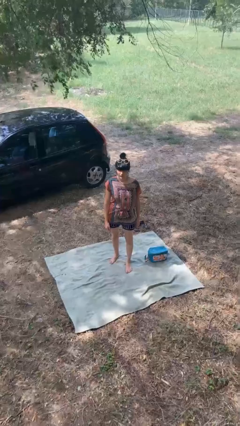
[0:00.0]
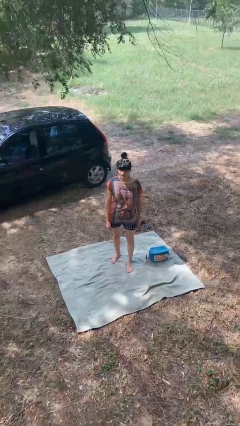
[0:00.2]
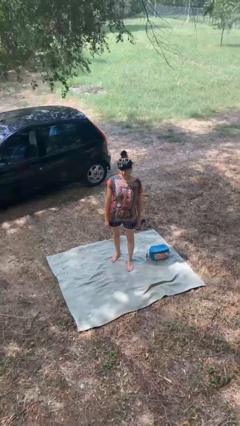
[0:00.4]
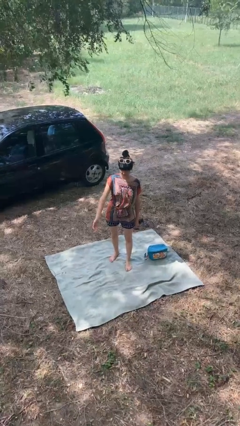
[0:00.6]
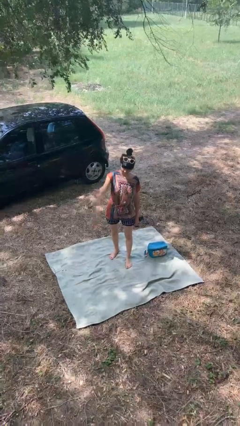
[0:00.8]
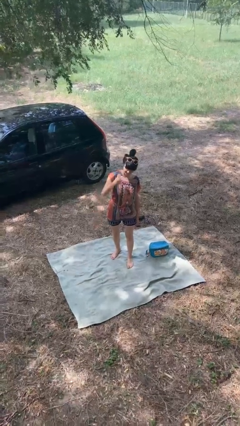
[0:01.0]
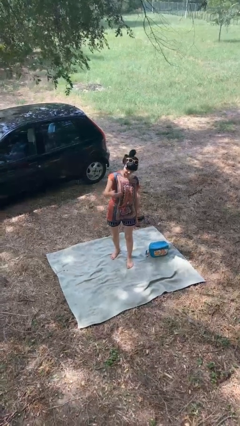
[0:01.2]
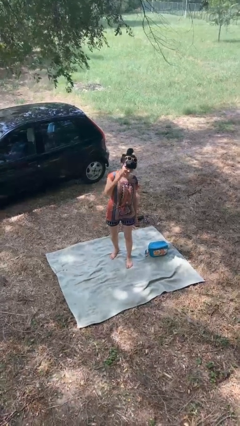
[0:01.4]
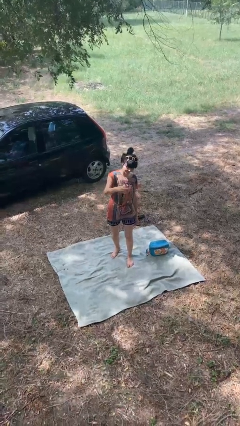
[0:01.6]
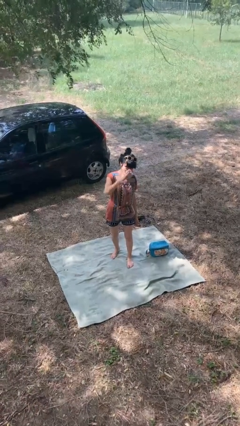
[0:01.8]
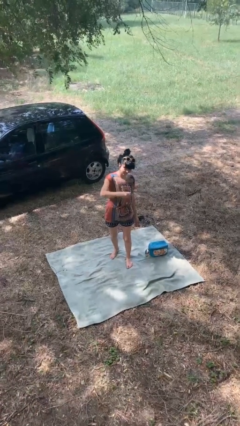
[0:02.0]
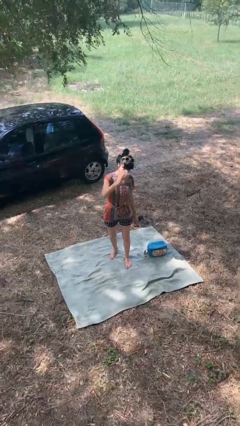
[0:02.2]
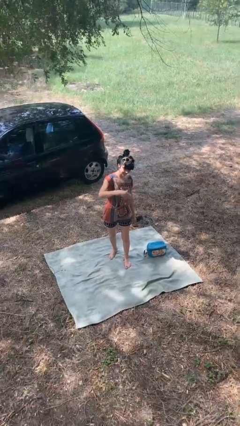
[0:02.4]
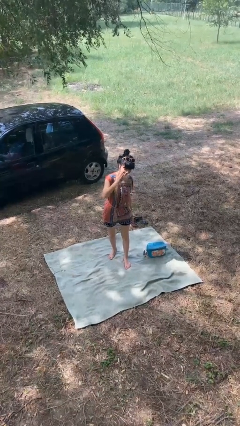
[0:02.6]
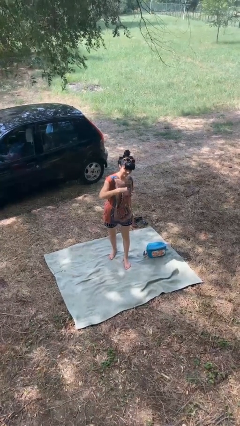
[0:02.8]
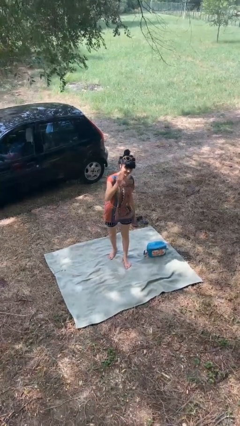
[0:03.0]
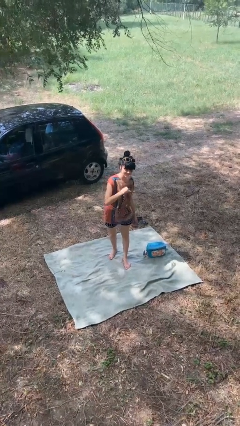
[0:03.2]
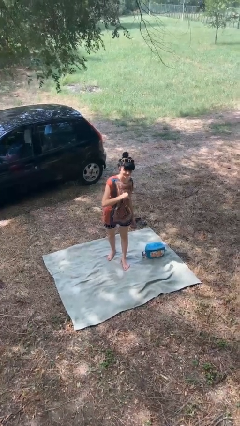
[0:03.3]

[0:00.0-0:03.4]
person gestures come here

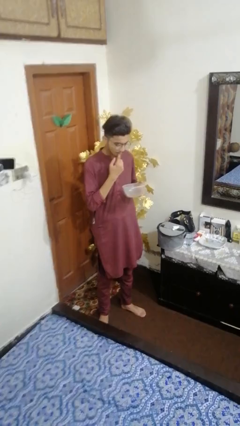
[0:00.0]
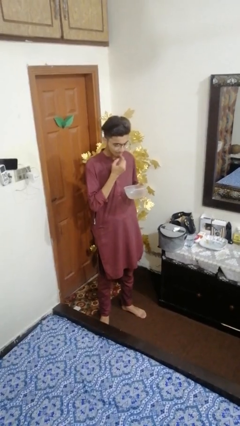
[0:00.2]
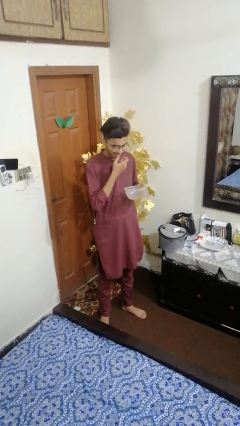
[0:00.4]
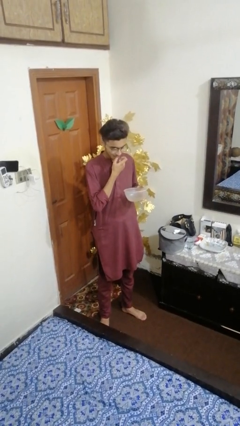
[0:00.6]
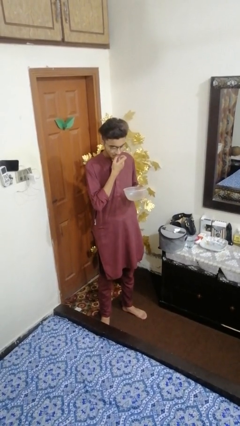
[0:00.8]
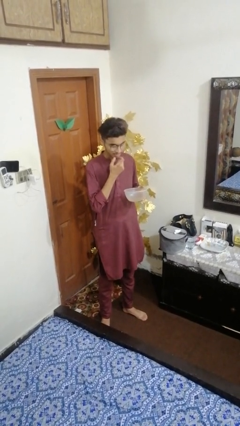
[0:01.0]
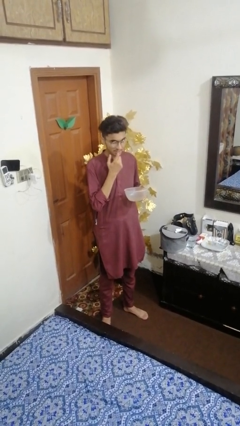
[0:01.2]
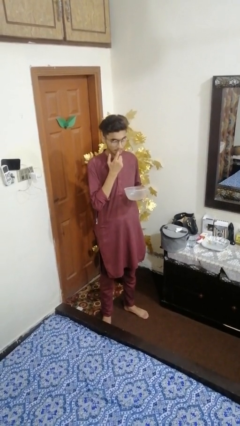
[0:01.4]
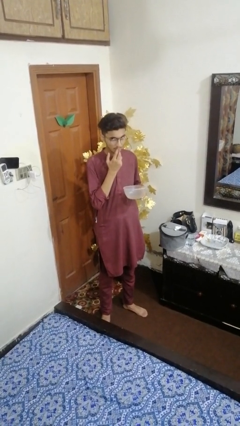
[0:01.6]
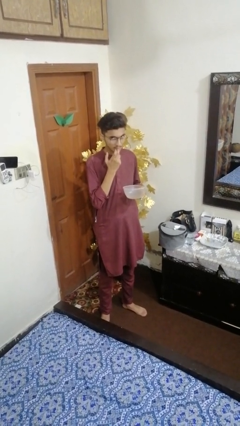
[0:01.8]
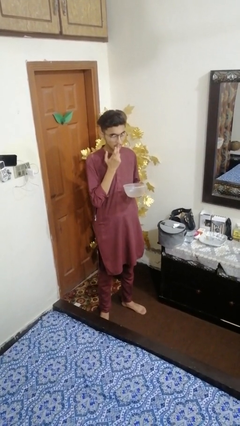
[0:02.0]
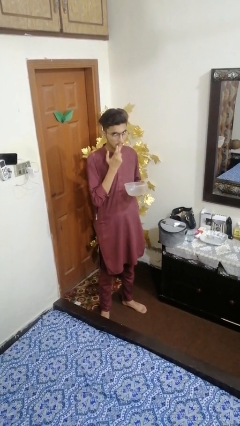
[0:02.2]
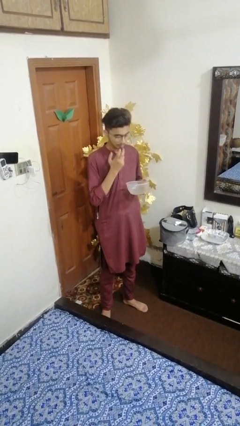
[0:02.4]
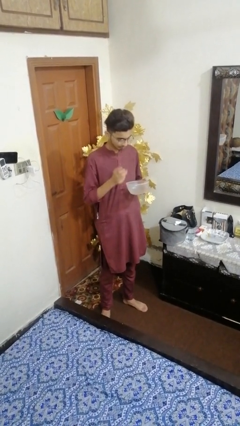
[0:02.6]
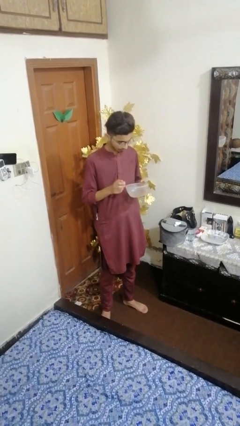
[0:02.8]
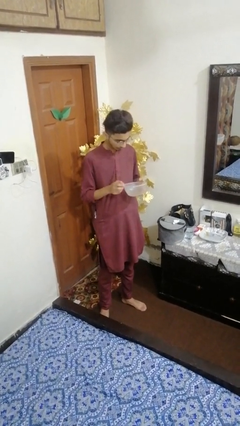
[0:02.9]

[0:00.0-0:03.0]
person licks fingers

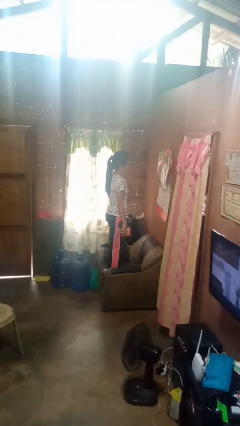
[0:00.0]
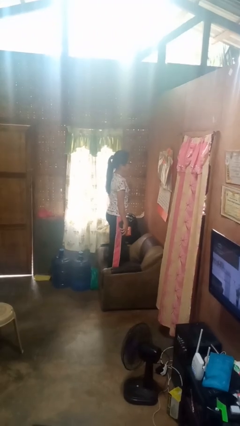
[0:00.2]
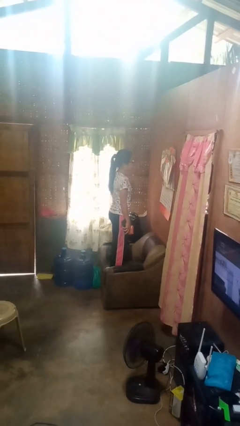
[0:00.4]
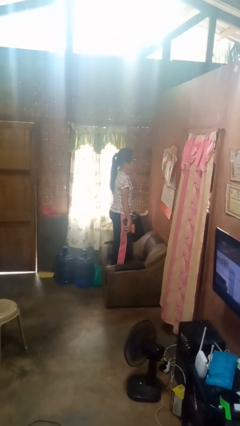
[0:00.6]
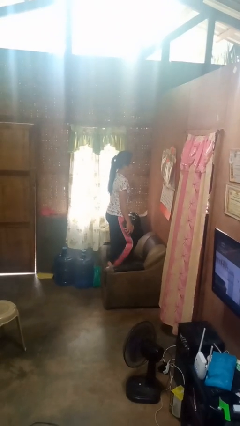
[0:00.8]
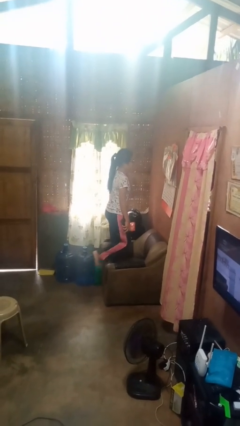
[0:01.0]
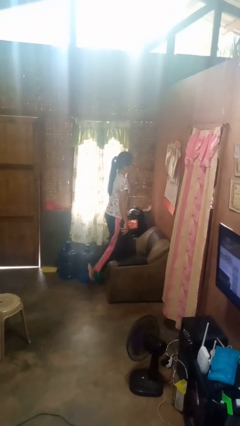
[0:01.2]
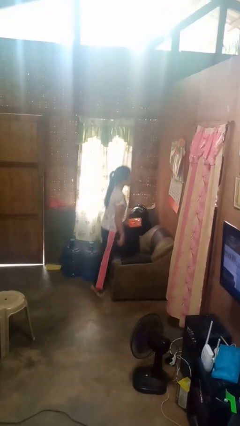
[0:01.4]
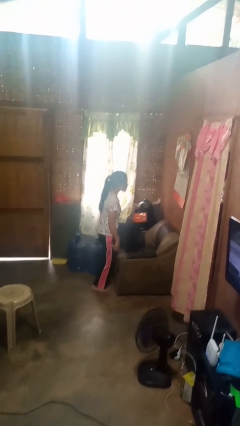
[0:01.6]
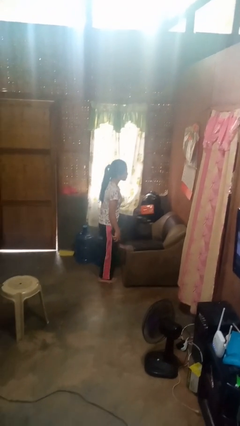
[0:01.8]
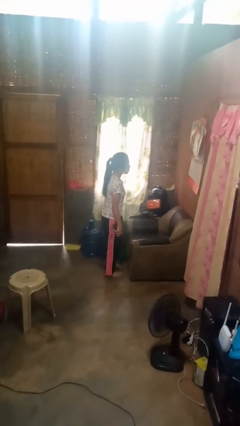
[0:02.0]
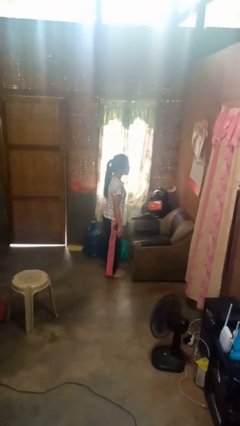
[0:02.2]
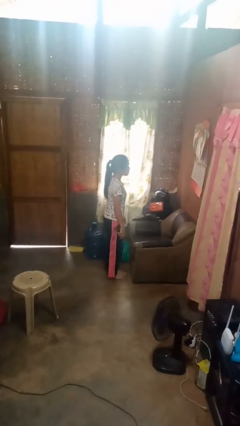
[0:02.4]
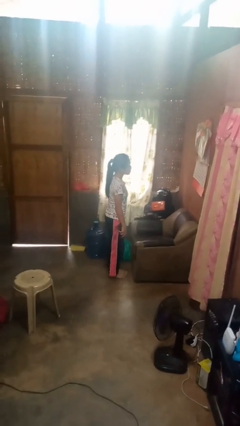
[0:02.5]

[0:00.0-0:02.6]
person climbs off couch

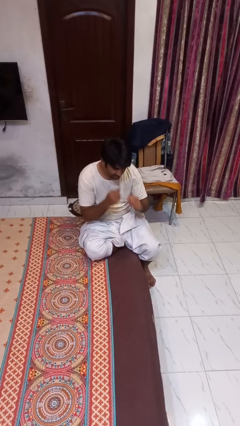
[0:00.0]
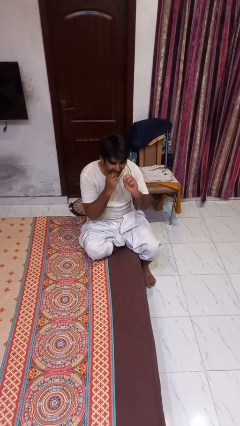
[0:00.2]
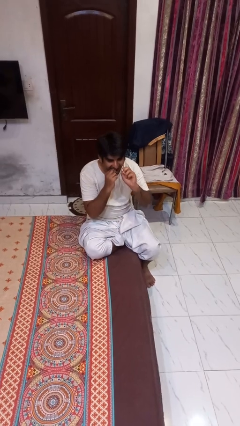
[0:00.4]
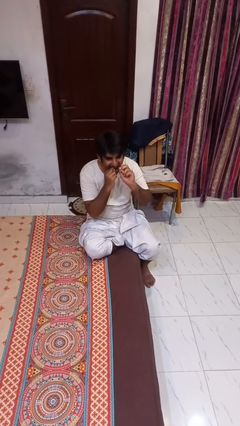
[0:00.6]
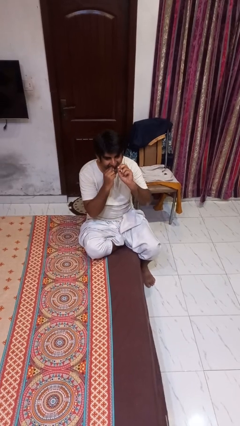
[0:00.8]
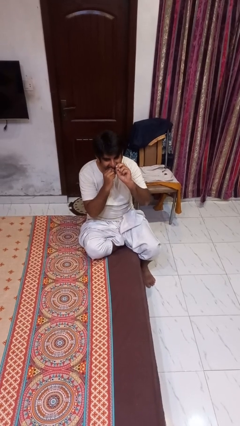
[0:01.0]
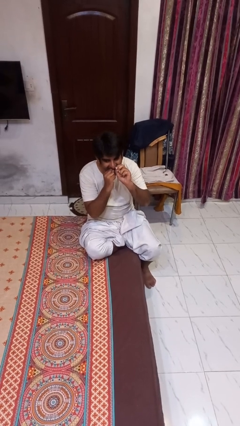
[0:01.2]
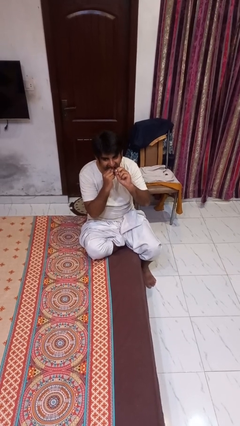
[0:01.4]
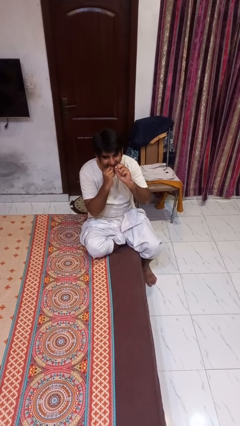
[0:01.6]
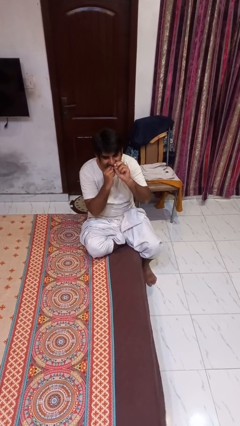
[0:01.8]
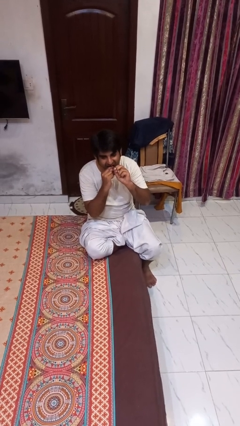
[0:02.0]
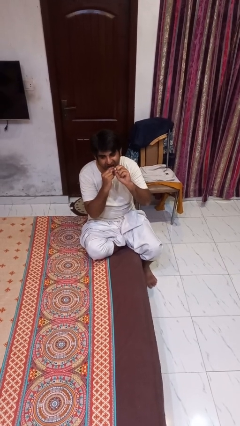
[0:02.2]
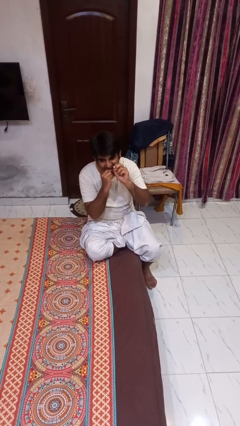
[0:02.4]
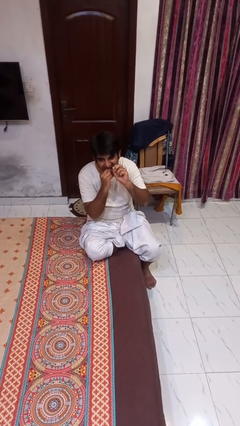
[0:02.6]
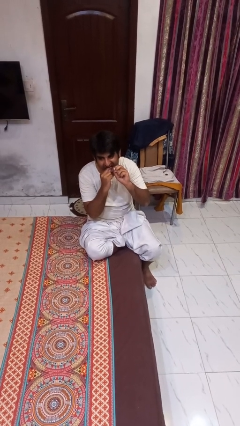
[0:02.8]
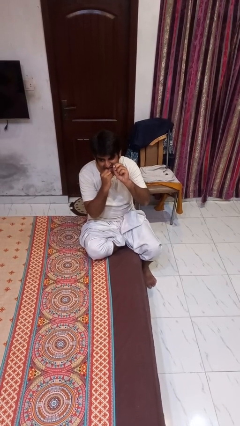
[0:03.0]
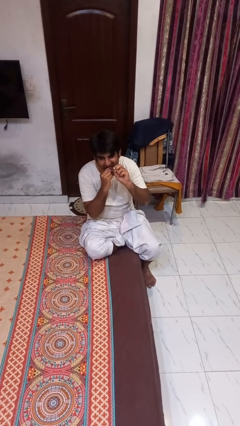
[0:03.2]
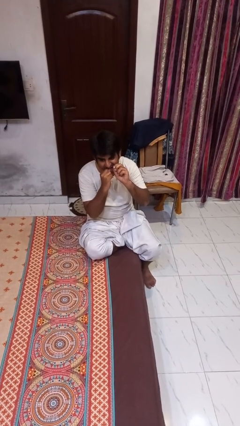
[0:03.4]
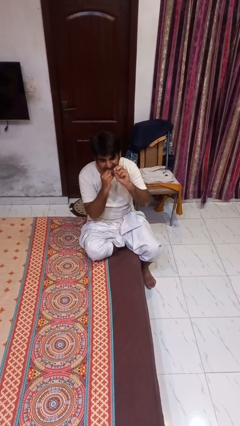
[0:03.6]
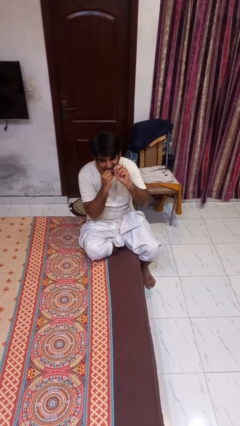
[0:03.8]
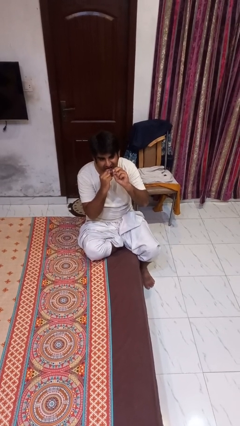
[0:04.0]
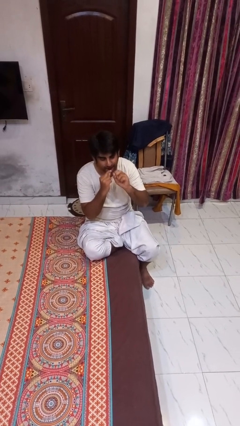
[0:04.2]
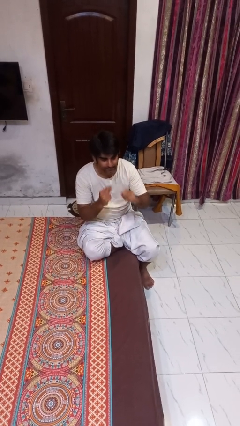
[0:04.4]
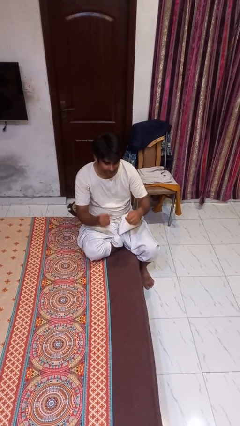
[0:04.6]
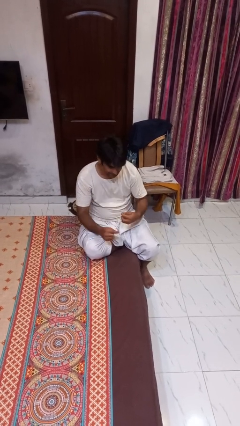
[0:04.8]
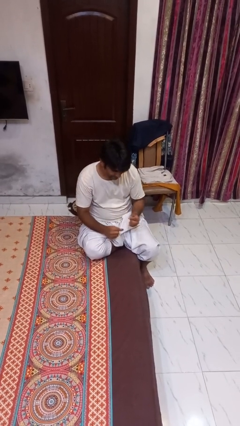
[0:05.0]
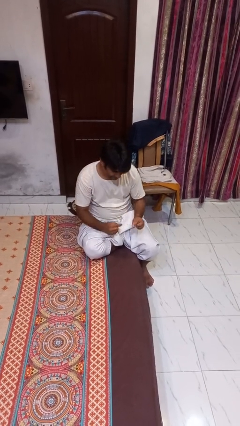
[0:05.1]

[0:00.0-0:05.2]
person flosses

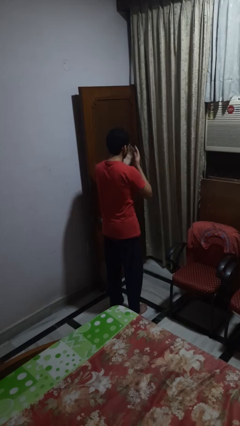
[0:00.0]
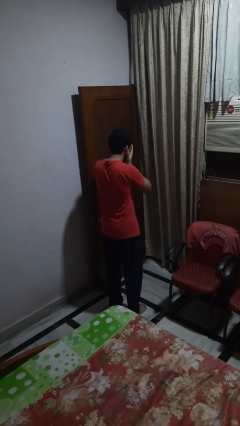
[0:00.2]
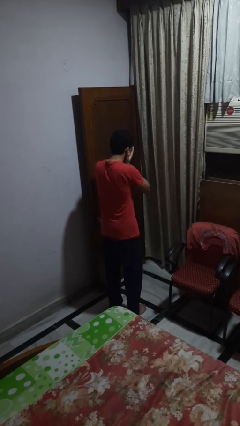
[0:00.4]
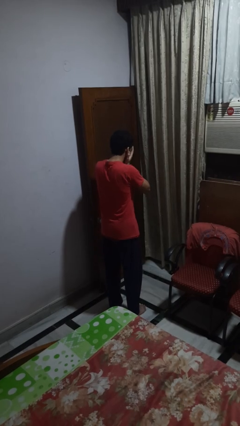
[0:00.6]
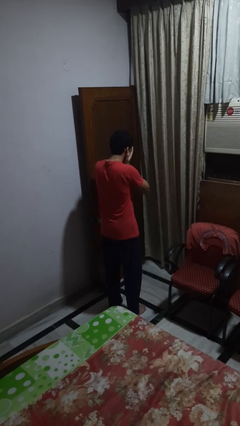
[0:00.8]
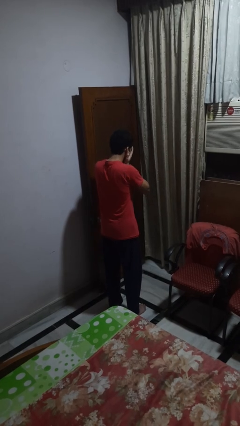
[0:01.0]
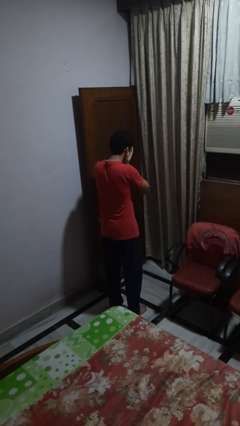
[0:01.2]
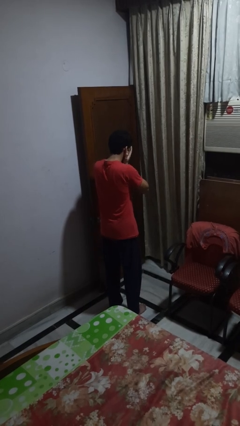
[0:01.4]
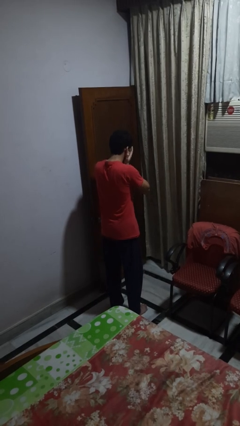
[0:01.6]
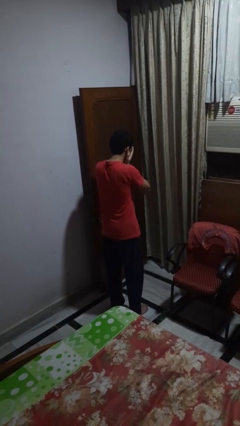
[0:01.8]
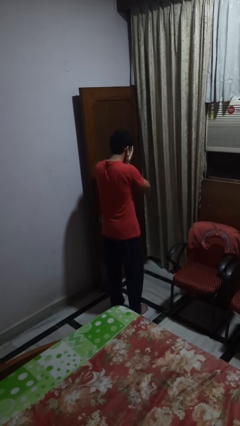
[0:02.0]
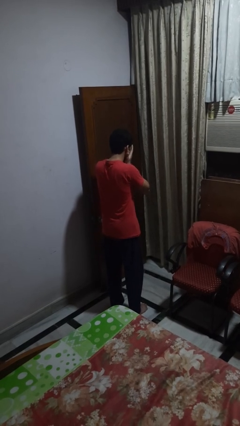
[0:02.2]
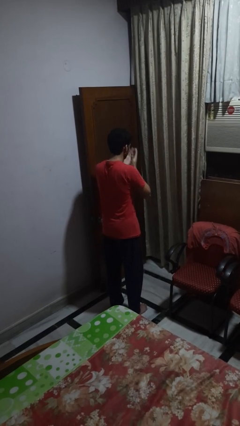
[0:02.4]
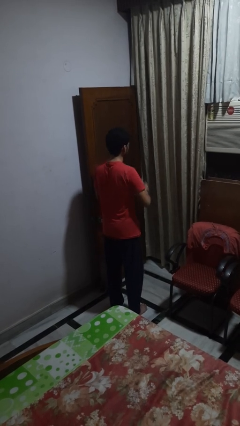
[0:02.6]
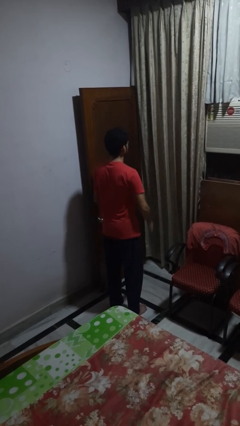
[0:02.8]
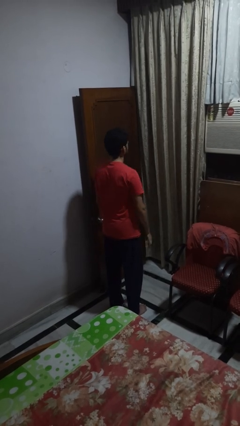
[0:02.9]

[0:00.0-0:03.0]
person covers face with hands

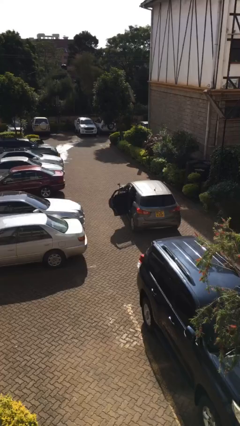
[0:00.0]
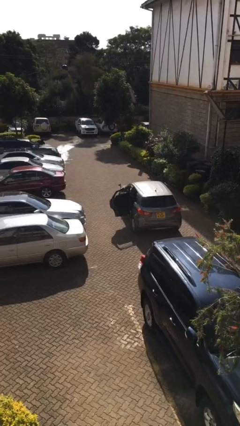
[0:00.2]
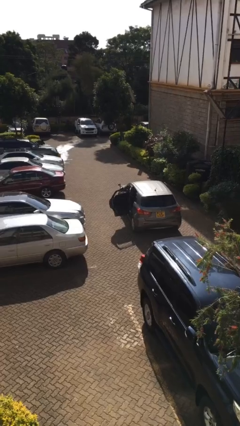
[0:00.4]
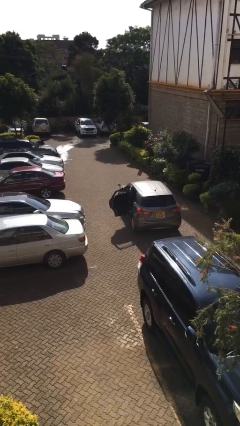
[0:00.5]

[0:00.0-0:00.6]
person enters car
